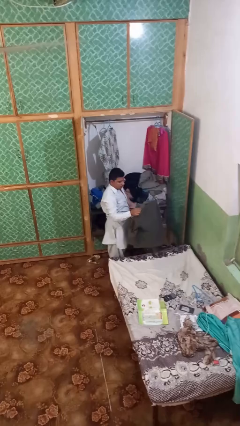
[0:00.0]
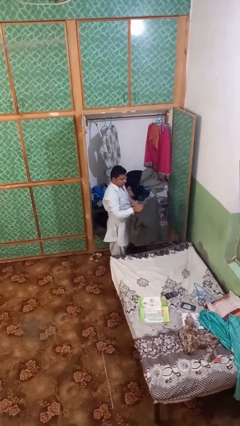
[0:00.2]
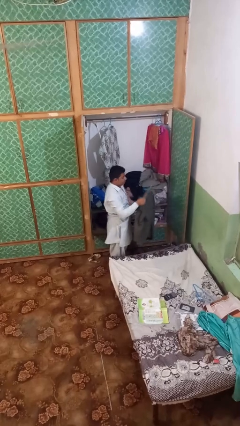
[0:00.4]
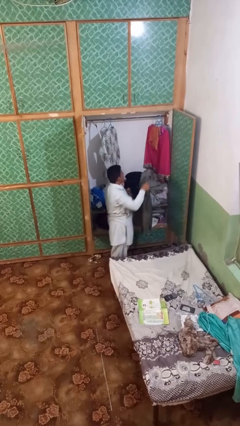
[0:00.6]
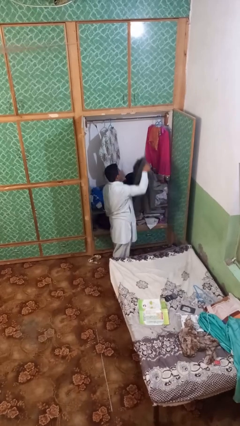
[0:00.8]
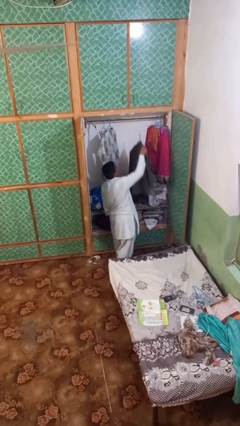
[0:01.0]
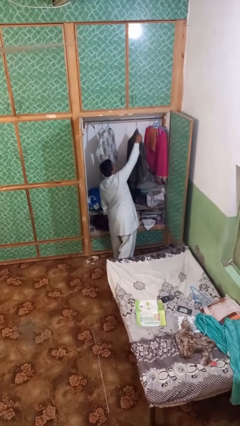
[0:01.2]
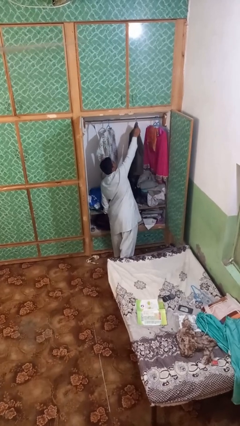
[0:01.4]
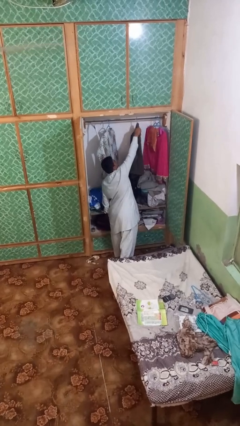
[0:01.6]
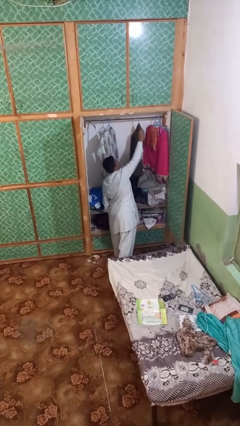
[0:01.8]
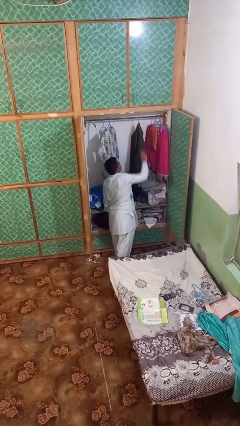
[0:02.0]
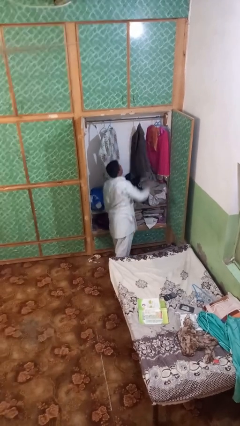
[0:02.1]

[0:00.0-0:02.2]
person puts clothes into closet

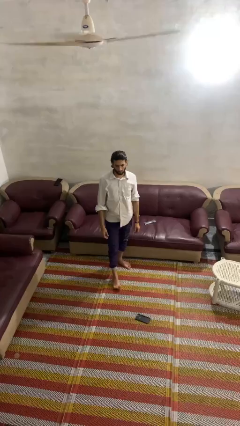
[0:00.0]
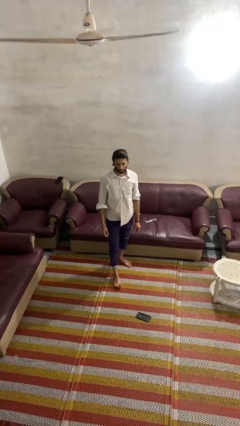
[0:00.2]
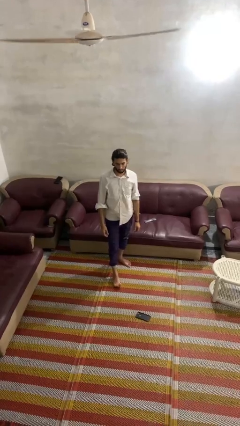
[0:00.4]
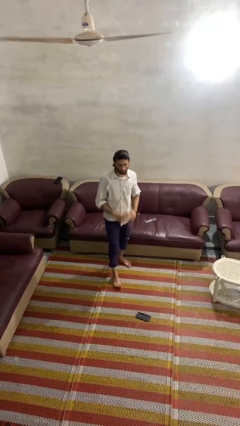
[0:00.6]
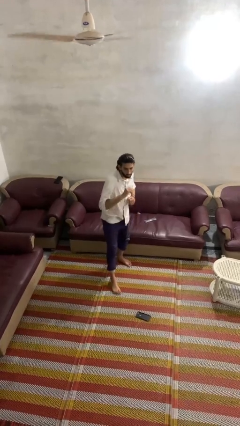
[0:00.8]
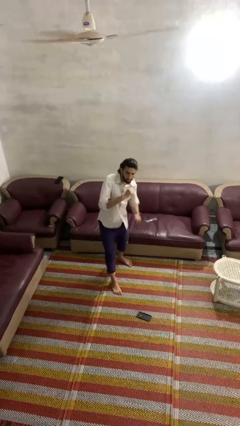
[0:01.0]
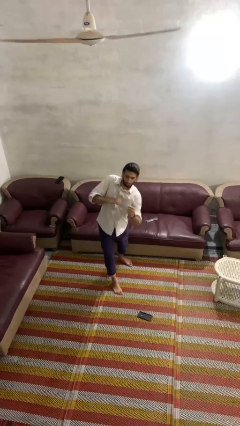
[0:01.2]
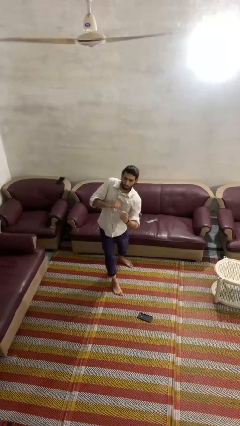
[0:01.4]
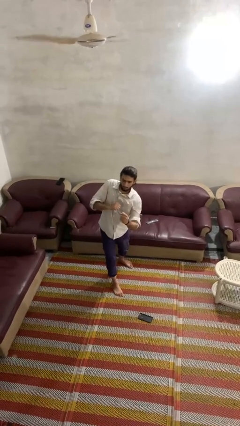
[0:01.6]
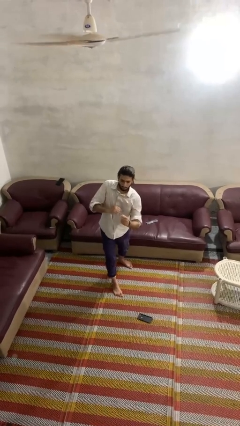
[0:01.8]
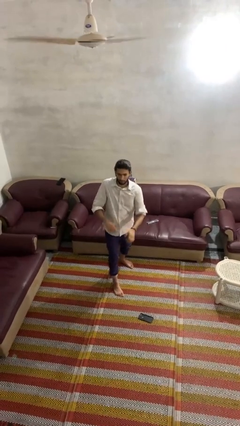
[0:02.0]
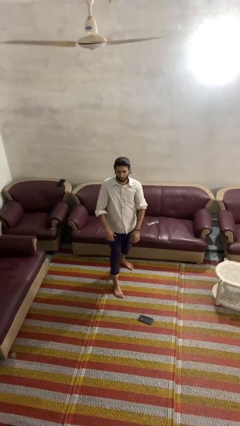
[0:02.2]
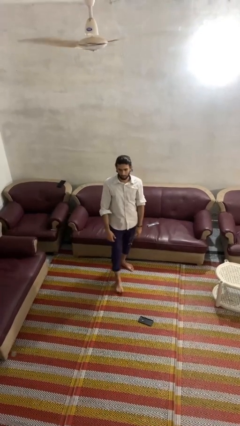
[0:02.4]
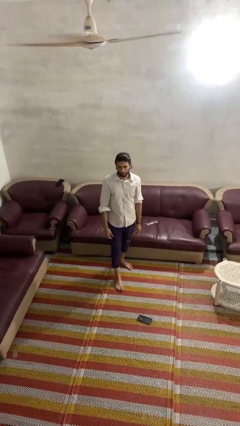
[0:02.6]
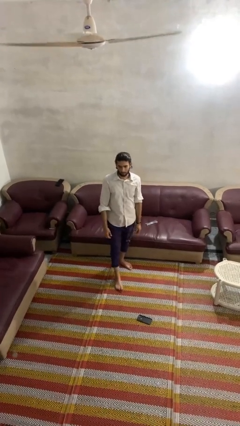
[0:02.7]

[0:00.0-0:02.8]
person punches

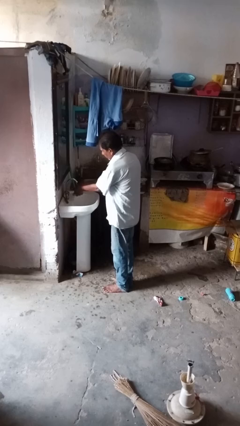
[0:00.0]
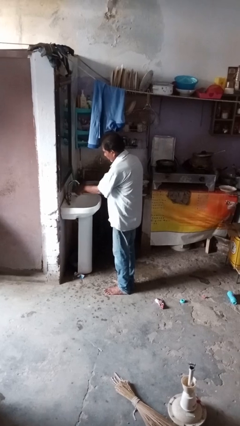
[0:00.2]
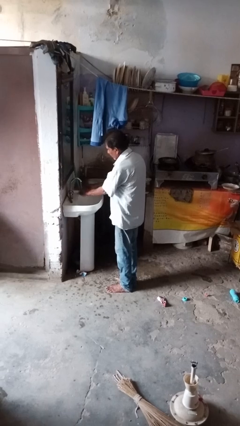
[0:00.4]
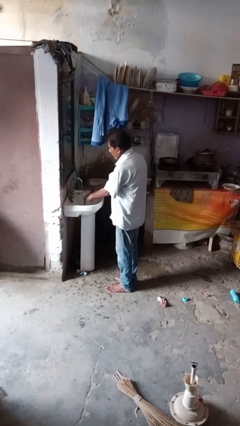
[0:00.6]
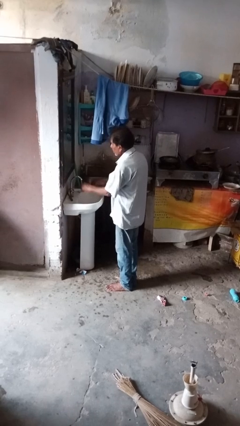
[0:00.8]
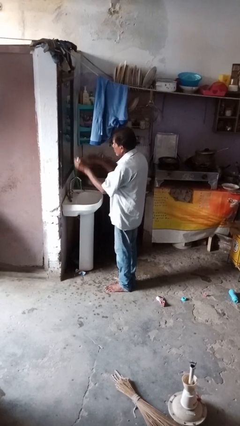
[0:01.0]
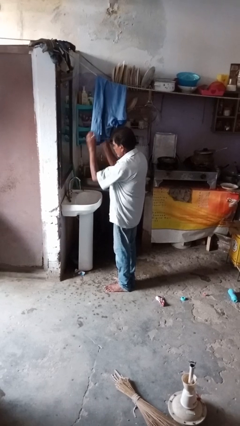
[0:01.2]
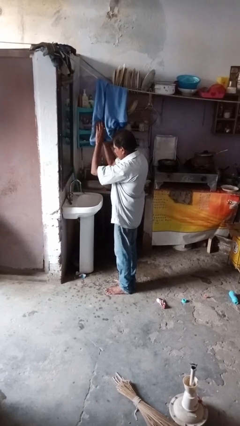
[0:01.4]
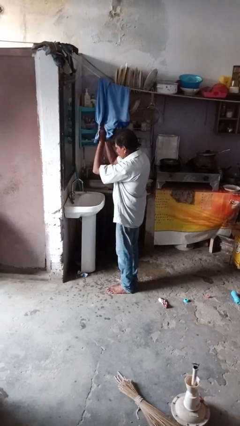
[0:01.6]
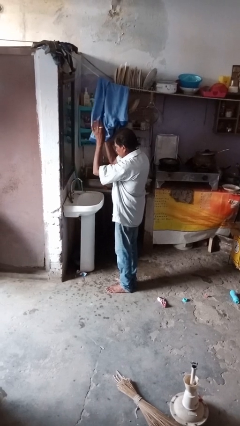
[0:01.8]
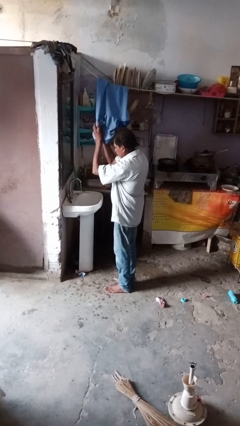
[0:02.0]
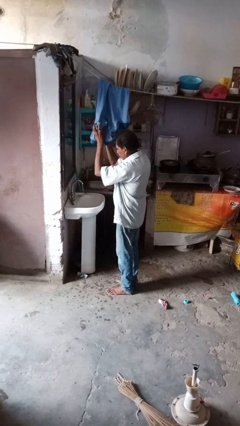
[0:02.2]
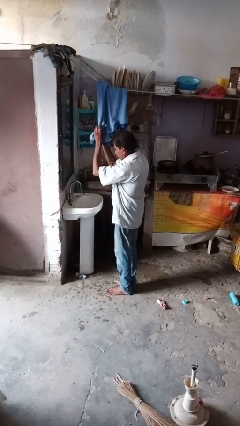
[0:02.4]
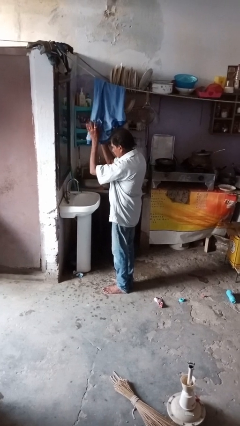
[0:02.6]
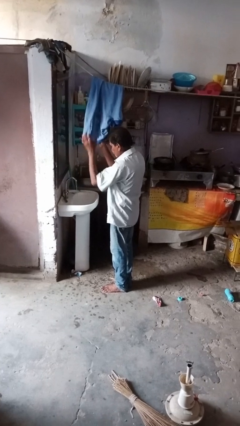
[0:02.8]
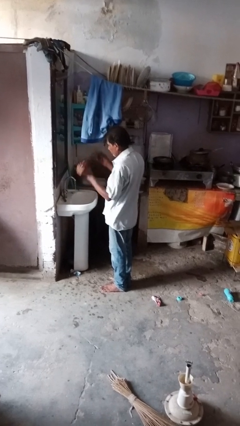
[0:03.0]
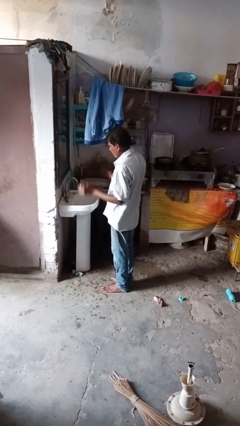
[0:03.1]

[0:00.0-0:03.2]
person dries hands with towel

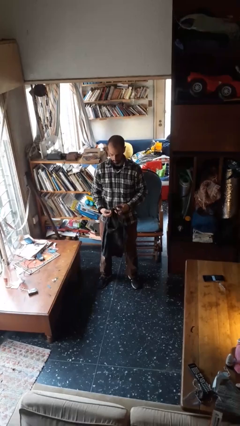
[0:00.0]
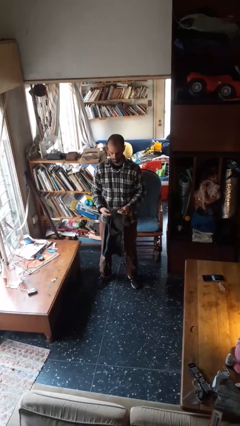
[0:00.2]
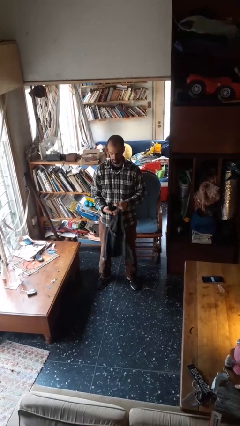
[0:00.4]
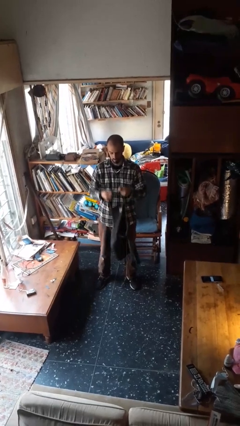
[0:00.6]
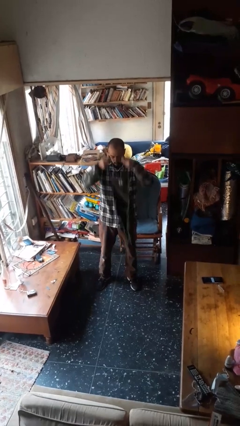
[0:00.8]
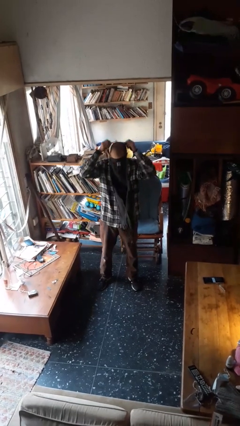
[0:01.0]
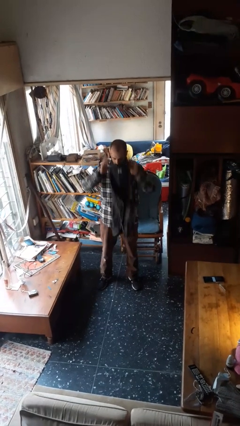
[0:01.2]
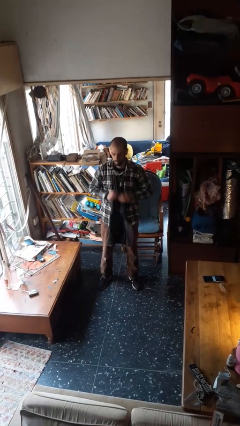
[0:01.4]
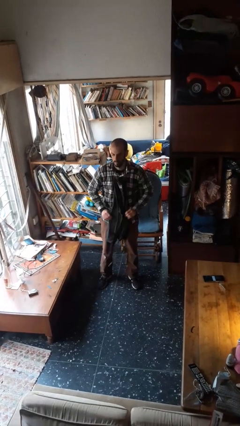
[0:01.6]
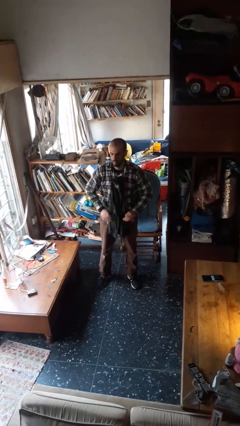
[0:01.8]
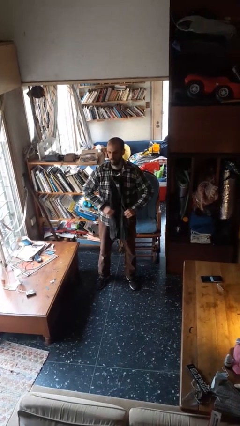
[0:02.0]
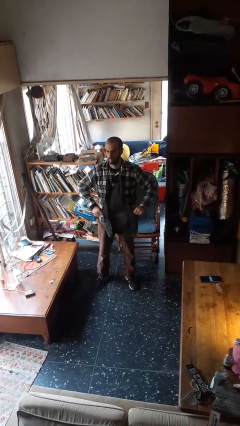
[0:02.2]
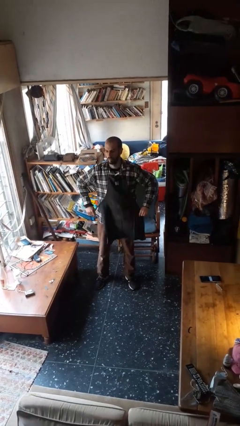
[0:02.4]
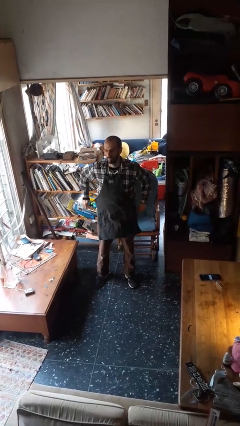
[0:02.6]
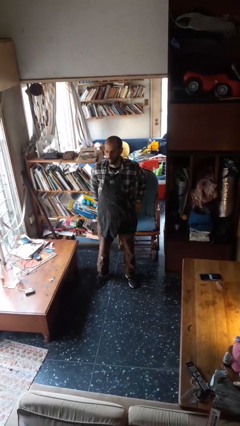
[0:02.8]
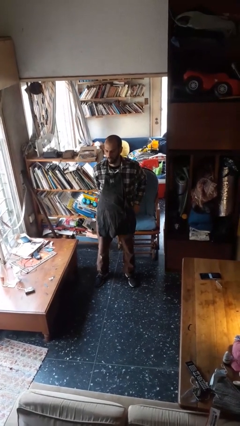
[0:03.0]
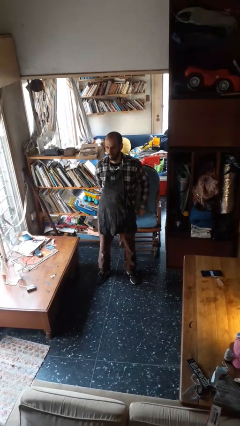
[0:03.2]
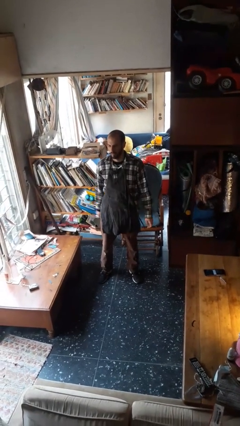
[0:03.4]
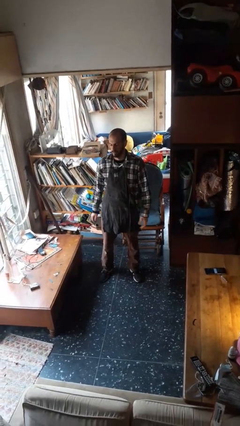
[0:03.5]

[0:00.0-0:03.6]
person puts on apron

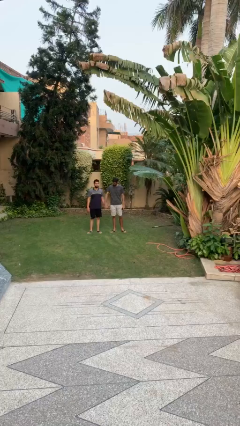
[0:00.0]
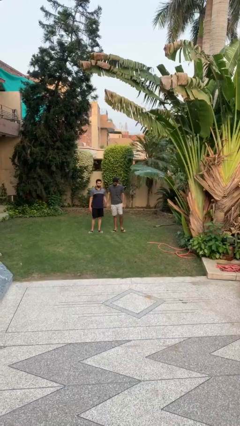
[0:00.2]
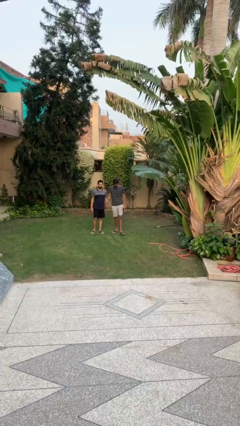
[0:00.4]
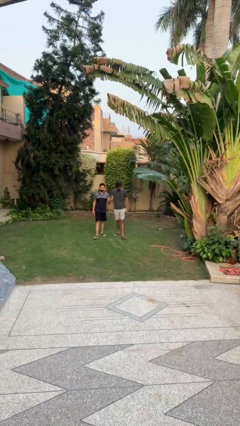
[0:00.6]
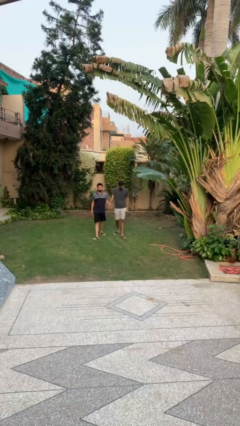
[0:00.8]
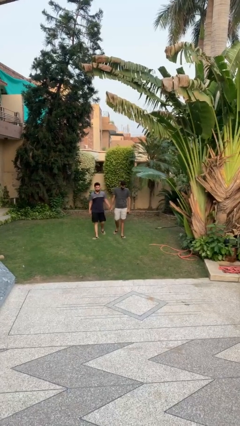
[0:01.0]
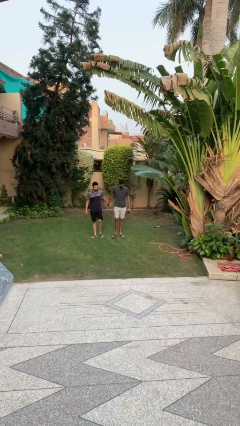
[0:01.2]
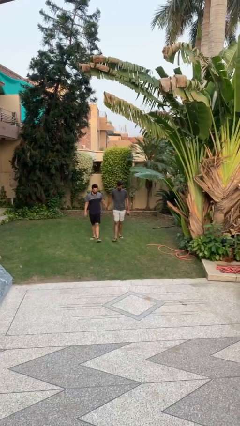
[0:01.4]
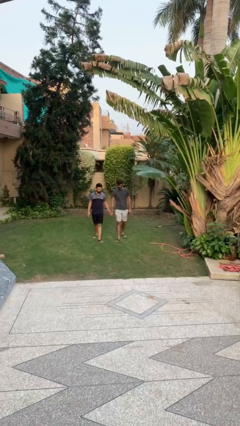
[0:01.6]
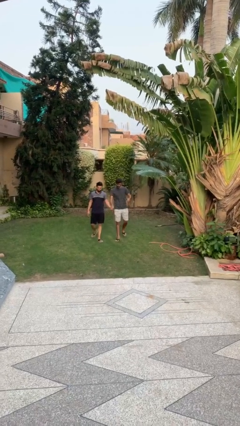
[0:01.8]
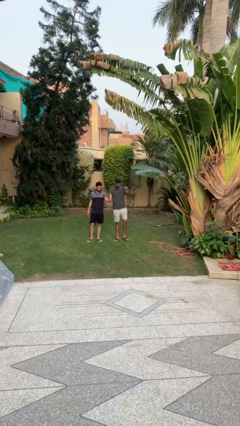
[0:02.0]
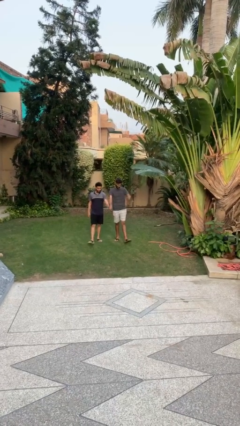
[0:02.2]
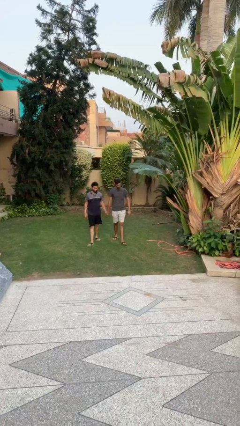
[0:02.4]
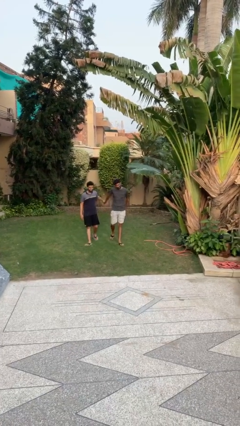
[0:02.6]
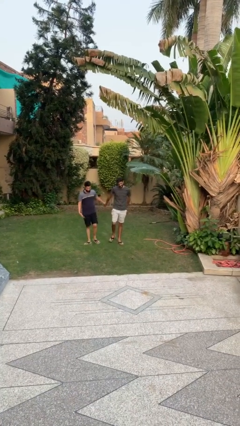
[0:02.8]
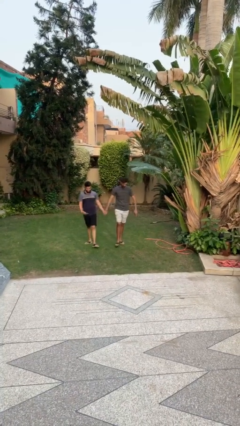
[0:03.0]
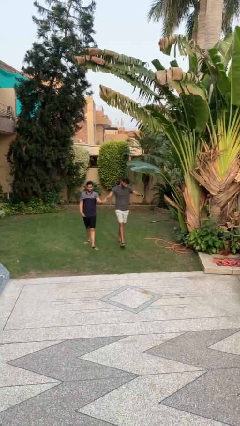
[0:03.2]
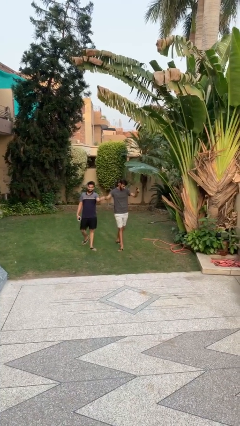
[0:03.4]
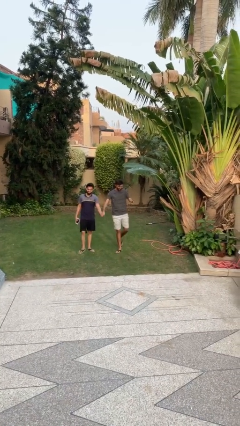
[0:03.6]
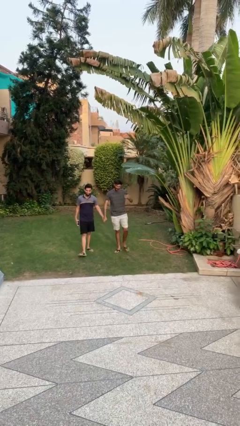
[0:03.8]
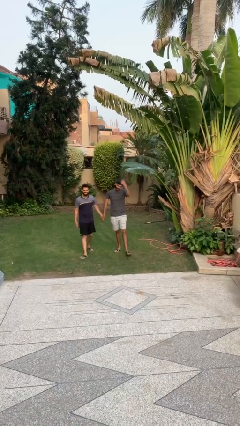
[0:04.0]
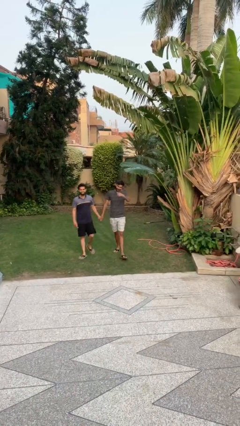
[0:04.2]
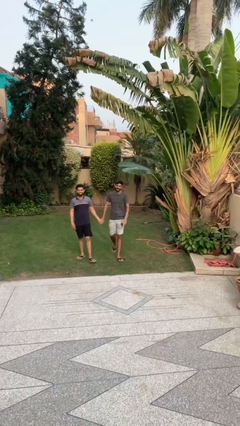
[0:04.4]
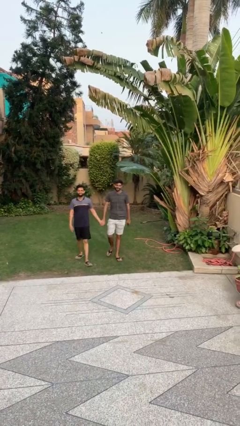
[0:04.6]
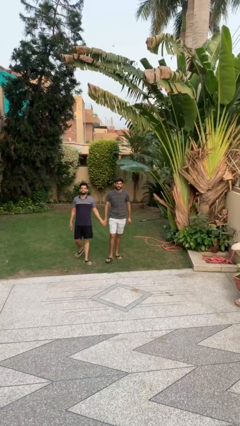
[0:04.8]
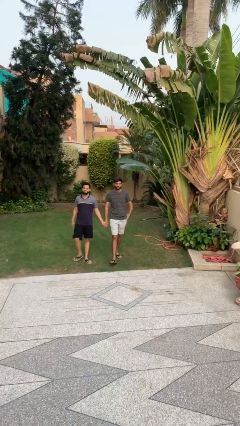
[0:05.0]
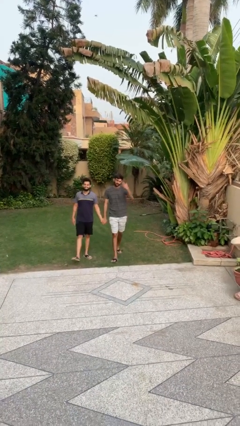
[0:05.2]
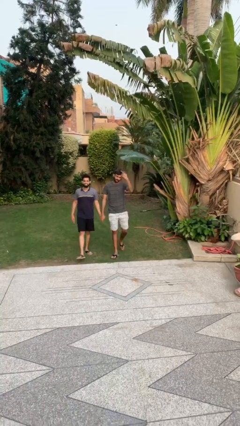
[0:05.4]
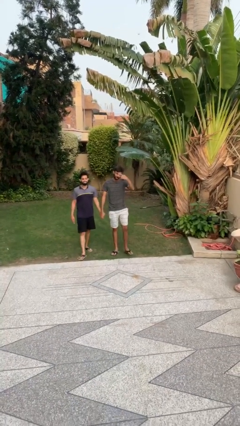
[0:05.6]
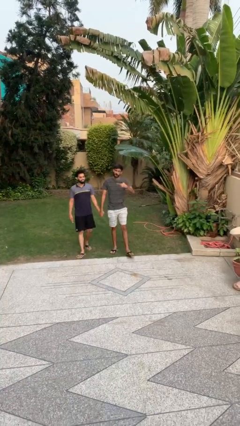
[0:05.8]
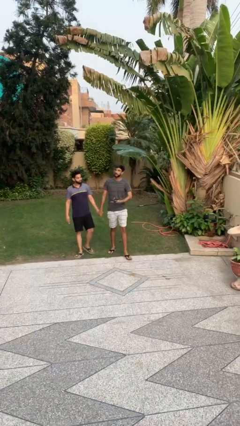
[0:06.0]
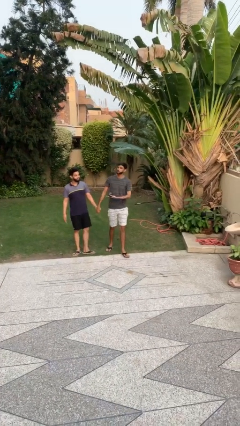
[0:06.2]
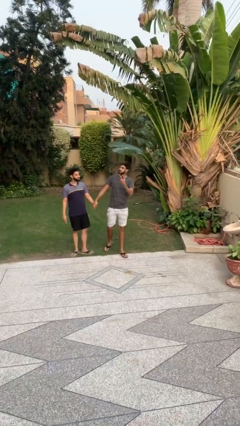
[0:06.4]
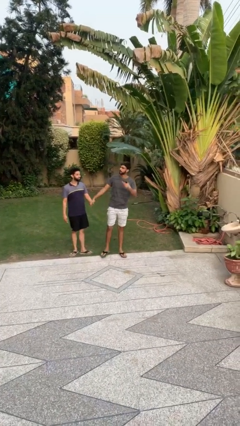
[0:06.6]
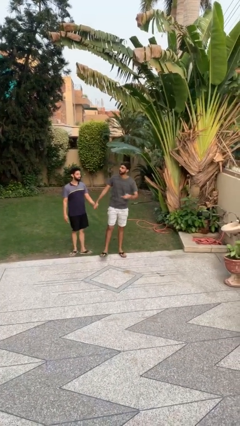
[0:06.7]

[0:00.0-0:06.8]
person holds hand
